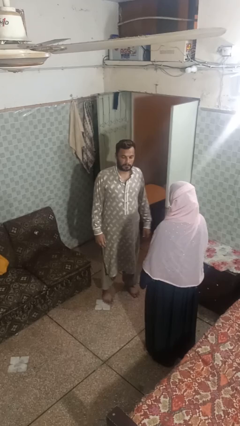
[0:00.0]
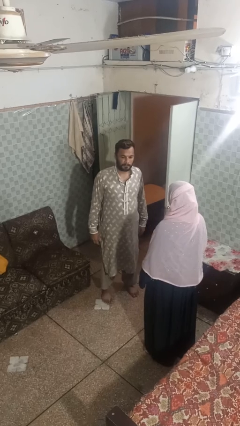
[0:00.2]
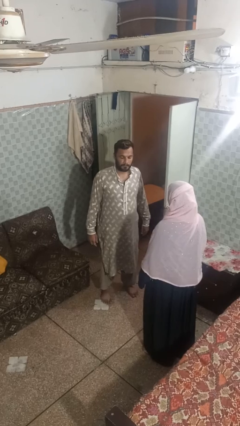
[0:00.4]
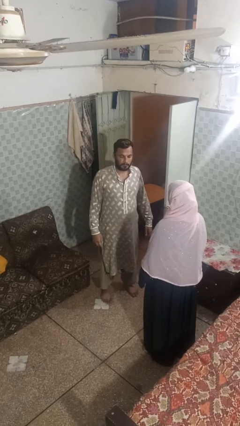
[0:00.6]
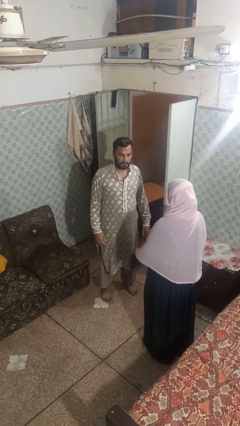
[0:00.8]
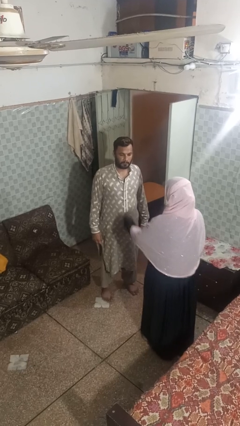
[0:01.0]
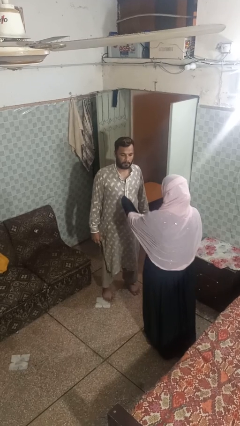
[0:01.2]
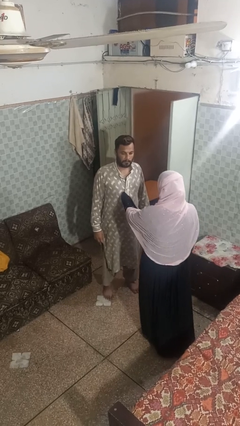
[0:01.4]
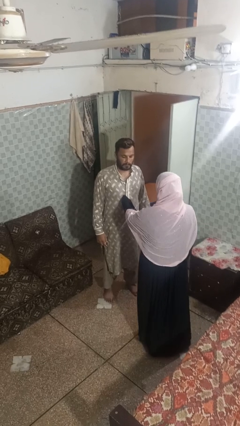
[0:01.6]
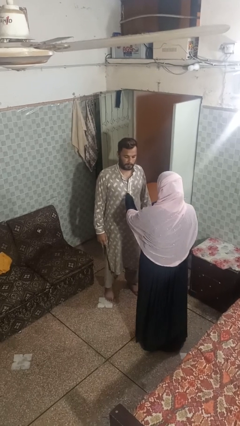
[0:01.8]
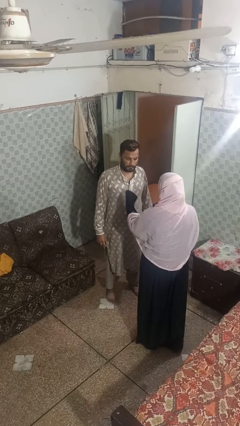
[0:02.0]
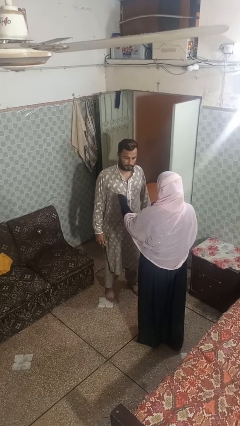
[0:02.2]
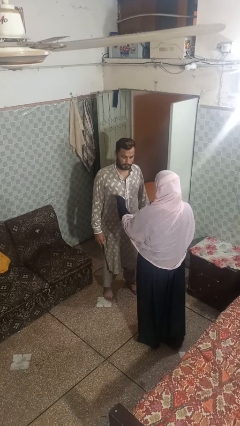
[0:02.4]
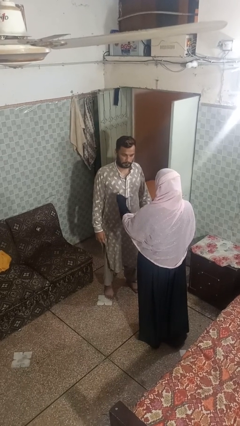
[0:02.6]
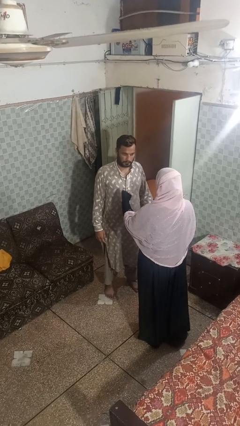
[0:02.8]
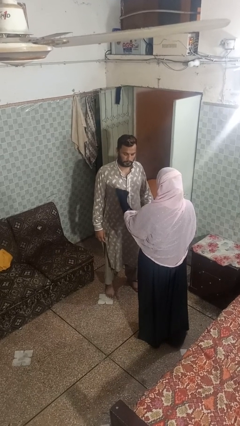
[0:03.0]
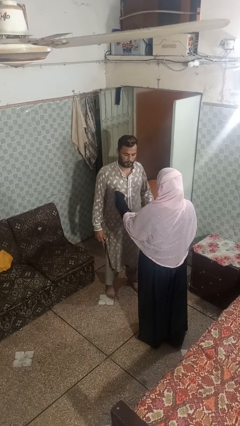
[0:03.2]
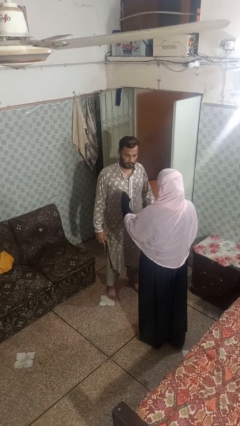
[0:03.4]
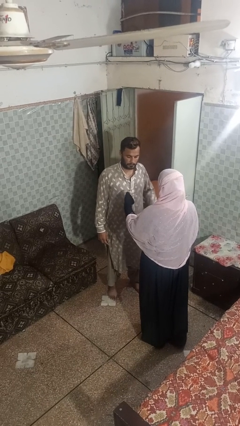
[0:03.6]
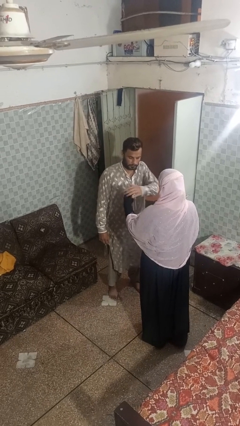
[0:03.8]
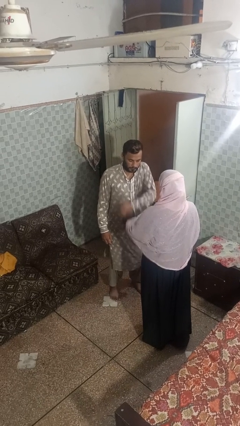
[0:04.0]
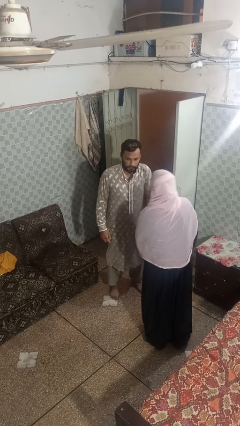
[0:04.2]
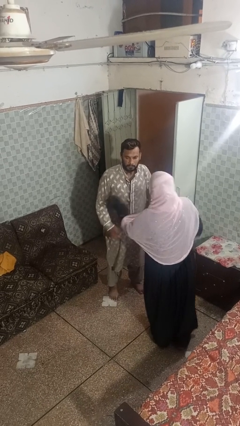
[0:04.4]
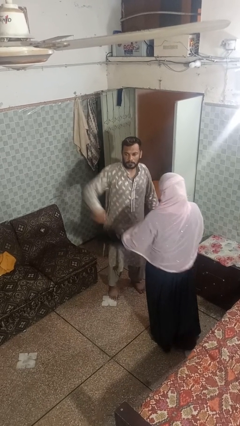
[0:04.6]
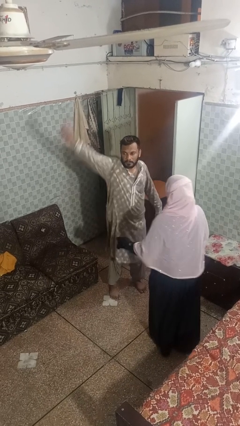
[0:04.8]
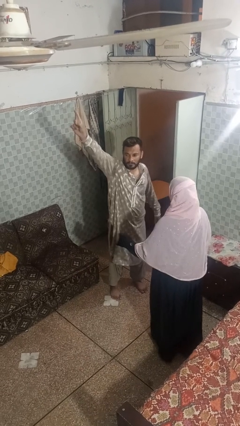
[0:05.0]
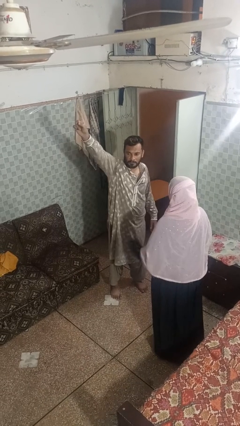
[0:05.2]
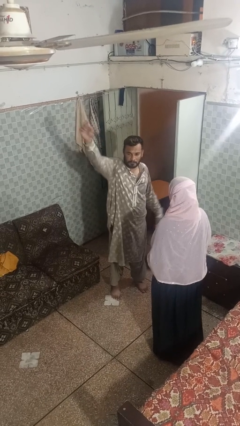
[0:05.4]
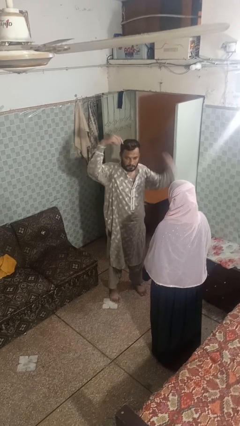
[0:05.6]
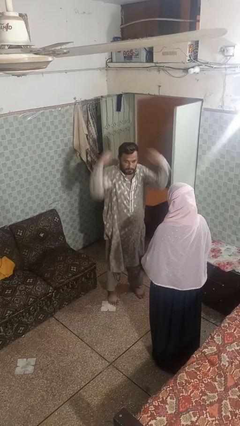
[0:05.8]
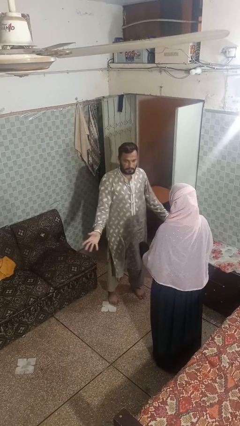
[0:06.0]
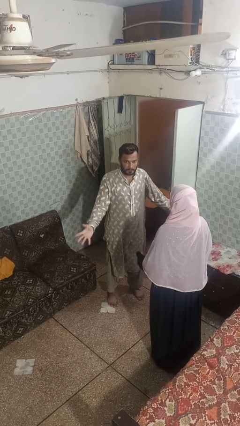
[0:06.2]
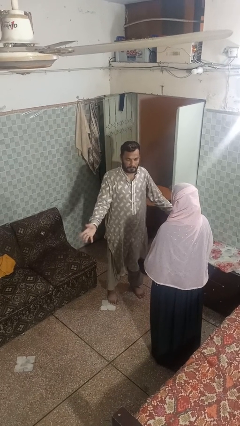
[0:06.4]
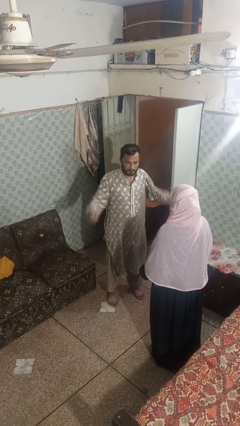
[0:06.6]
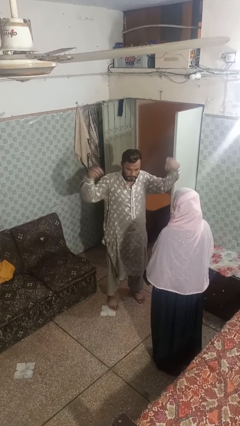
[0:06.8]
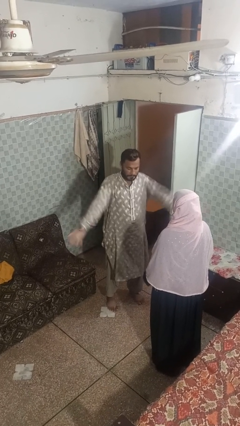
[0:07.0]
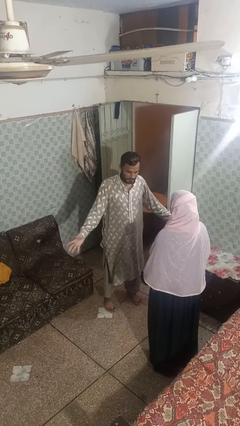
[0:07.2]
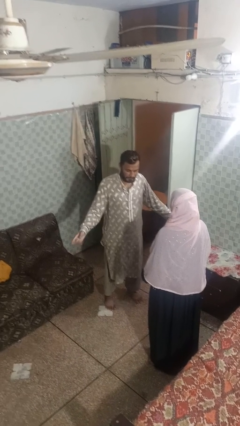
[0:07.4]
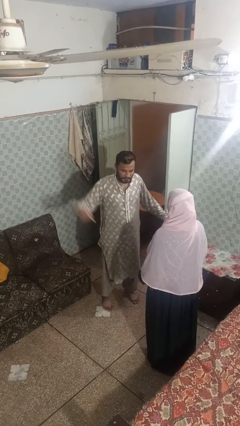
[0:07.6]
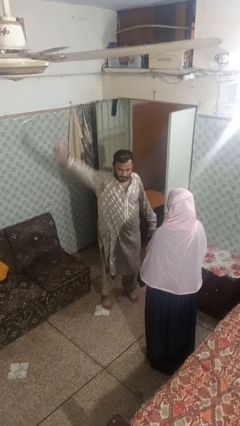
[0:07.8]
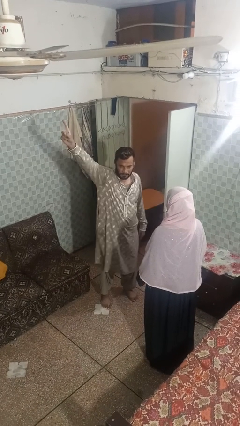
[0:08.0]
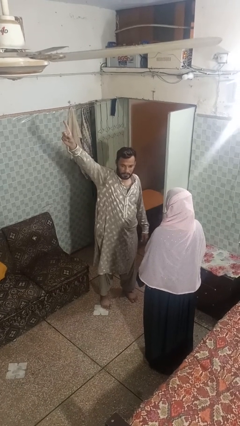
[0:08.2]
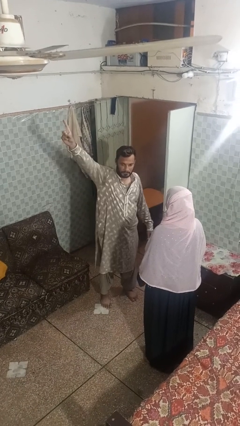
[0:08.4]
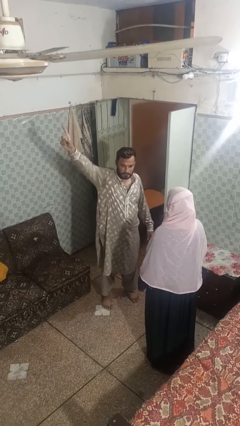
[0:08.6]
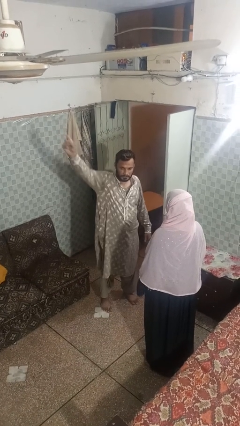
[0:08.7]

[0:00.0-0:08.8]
person shoves person

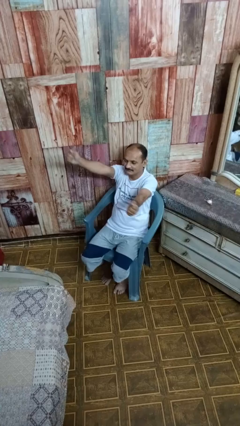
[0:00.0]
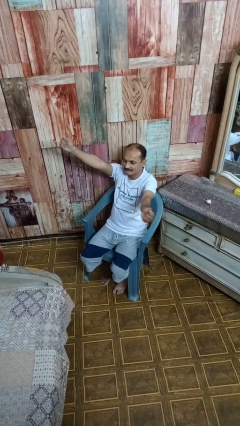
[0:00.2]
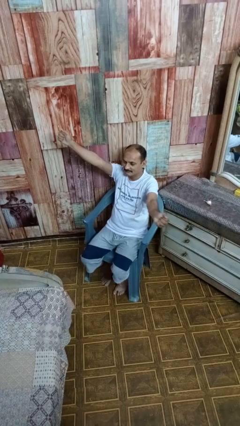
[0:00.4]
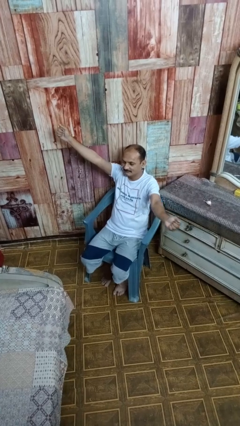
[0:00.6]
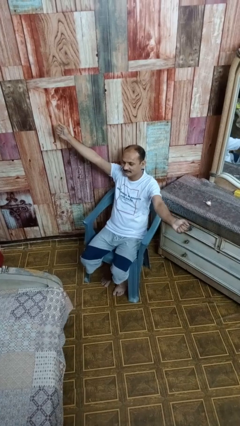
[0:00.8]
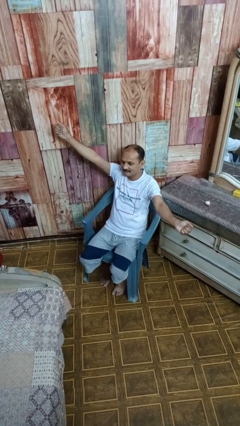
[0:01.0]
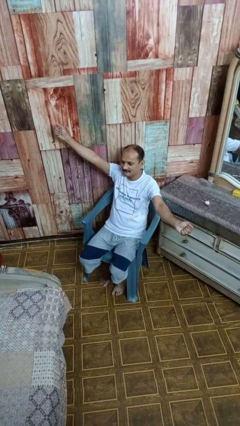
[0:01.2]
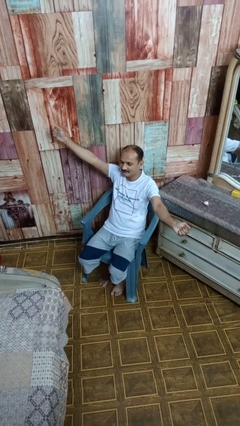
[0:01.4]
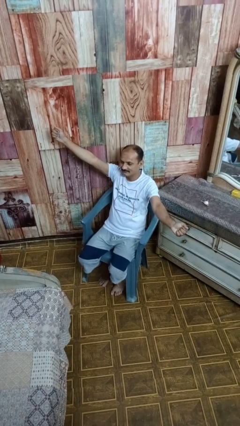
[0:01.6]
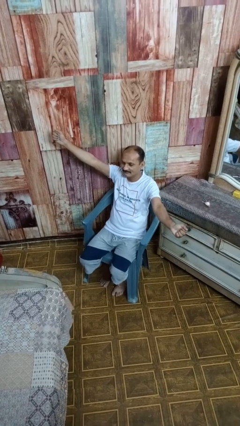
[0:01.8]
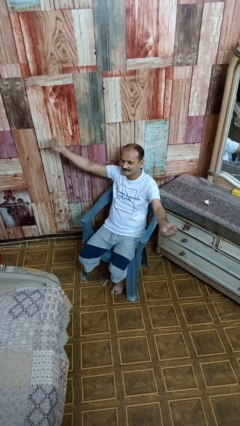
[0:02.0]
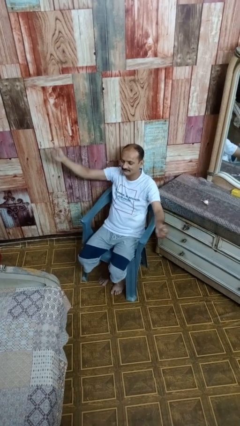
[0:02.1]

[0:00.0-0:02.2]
person gestures zoom out

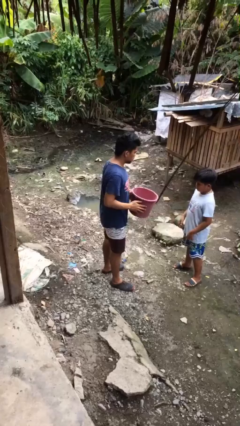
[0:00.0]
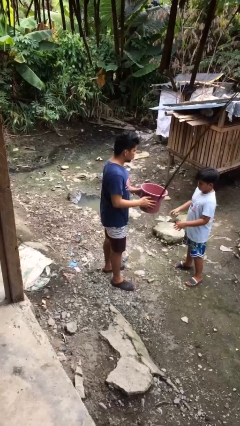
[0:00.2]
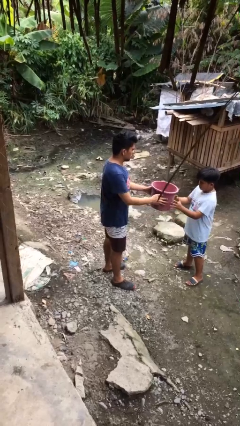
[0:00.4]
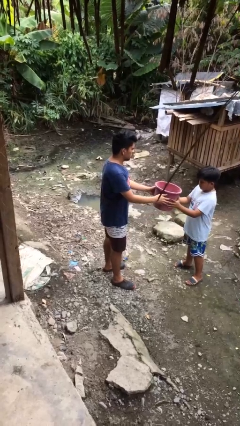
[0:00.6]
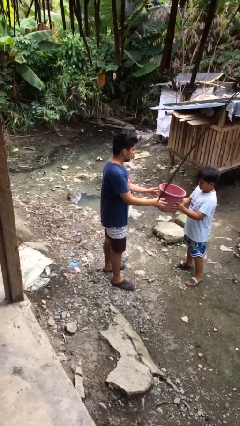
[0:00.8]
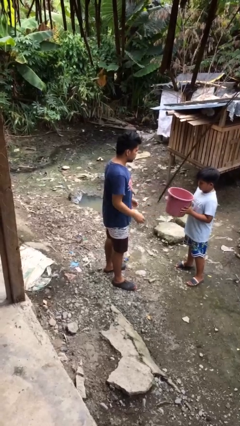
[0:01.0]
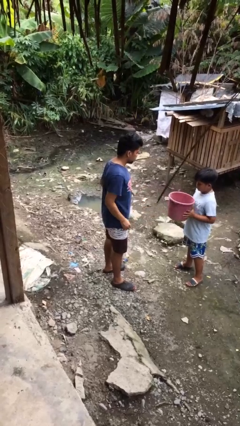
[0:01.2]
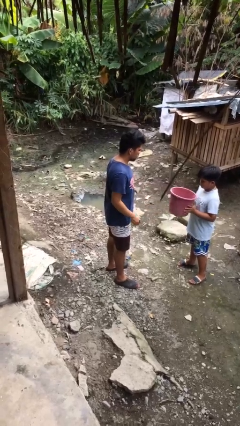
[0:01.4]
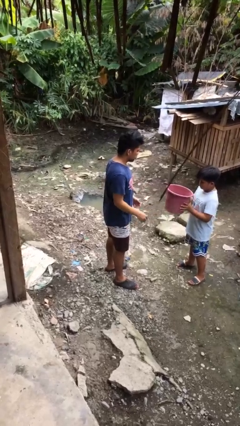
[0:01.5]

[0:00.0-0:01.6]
person transfers object to person

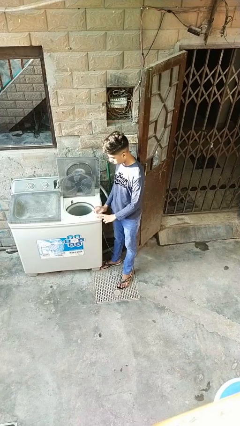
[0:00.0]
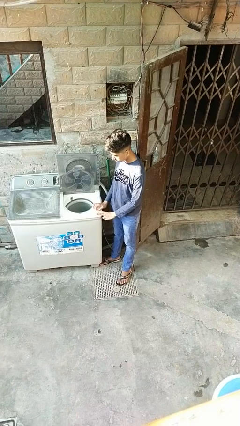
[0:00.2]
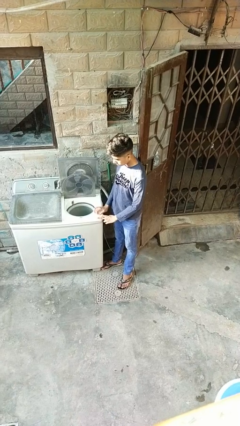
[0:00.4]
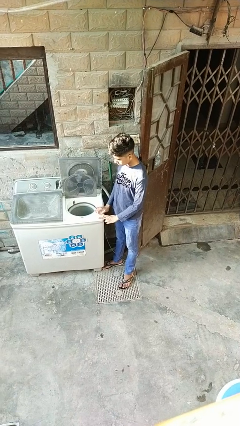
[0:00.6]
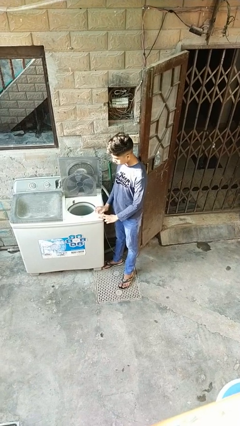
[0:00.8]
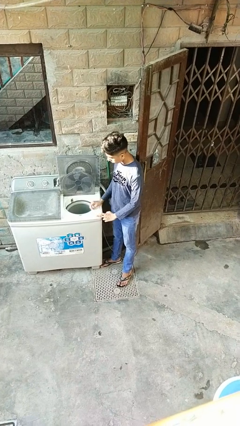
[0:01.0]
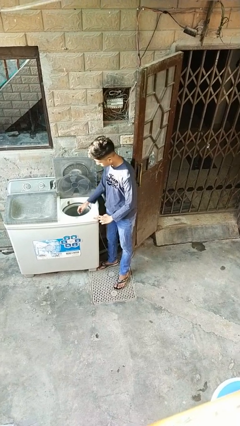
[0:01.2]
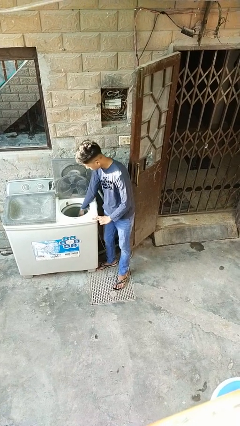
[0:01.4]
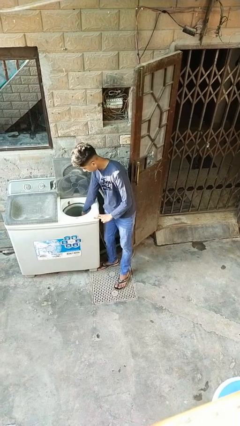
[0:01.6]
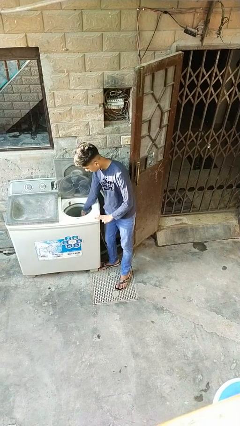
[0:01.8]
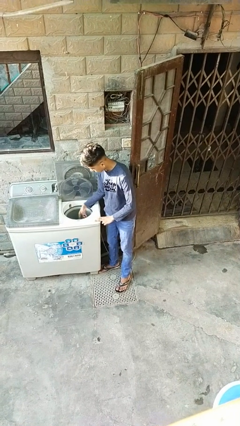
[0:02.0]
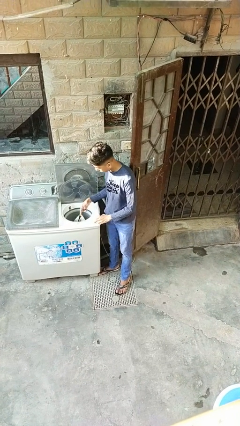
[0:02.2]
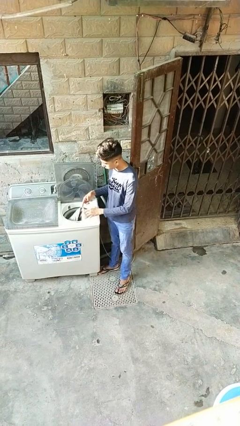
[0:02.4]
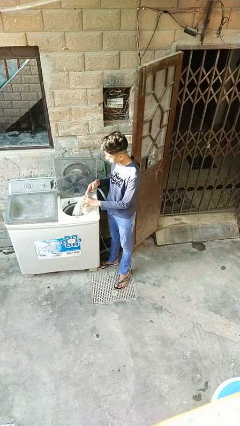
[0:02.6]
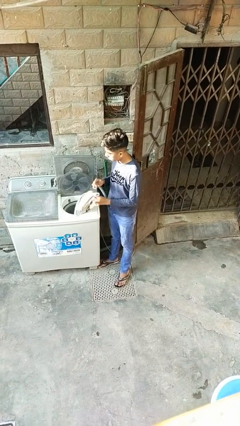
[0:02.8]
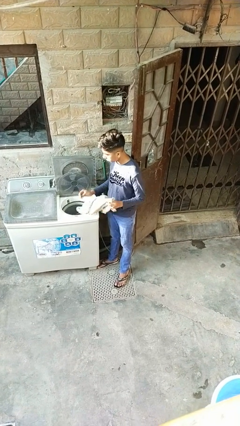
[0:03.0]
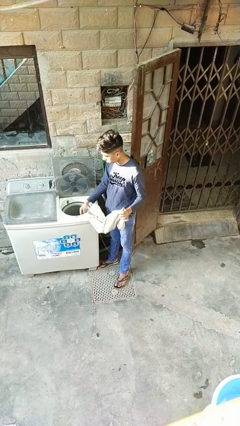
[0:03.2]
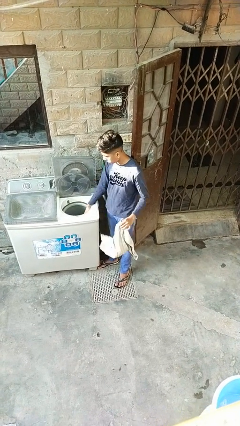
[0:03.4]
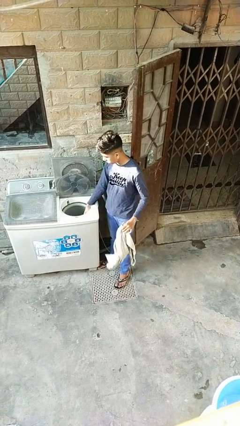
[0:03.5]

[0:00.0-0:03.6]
person unloads dryer

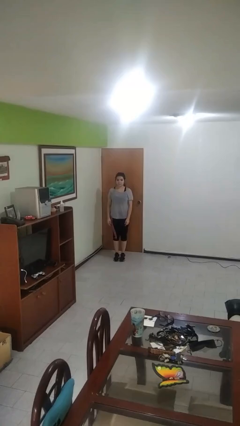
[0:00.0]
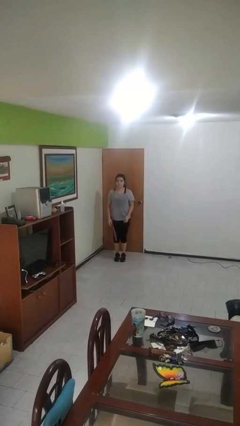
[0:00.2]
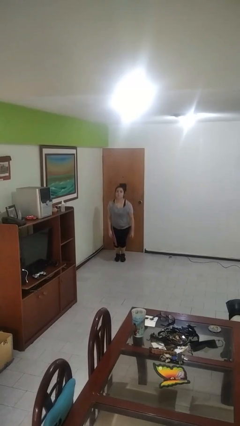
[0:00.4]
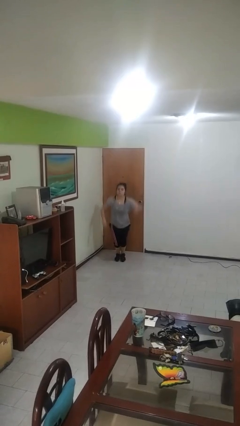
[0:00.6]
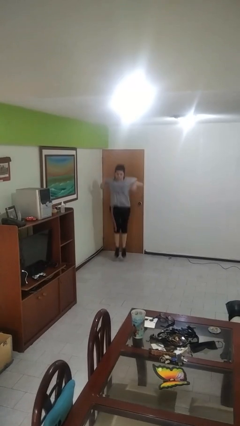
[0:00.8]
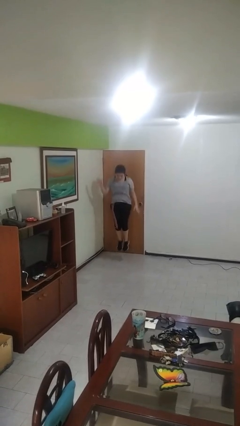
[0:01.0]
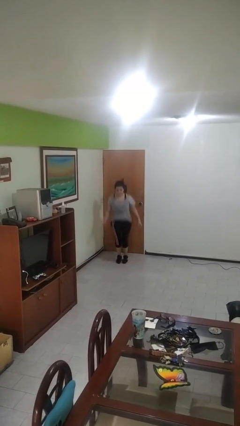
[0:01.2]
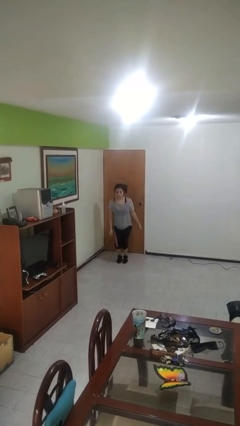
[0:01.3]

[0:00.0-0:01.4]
person jumps
